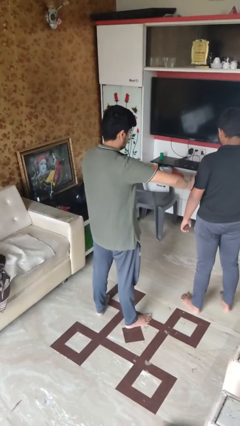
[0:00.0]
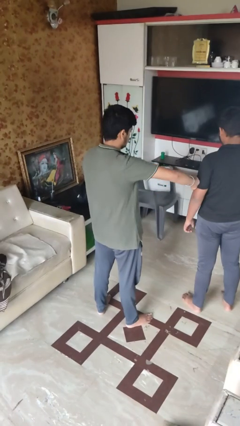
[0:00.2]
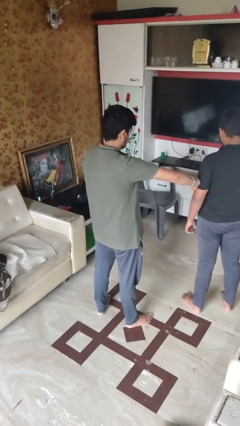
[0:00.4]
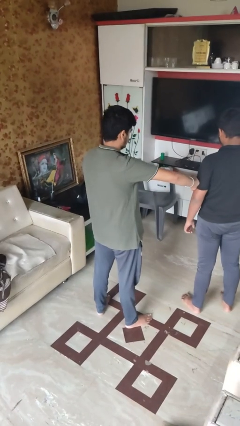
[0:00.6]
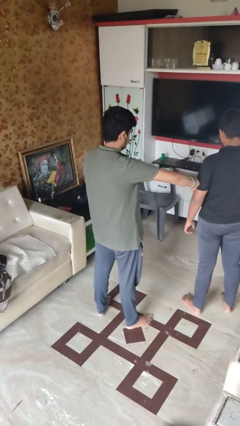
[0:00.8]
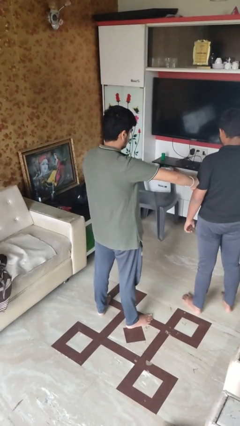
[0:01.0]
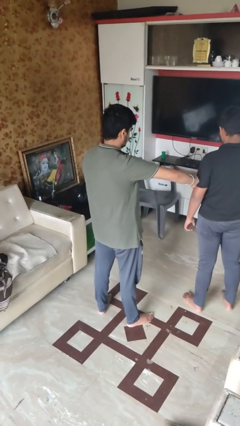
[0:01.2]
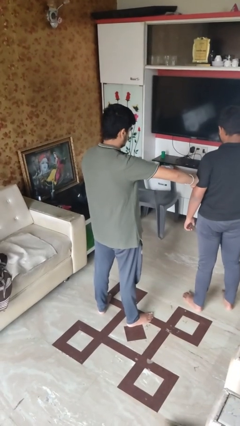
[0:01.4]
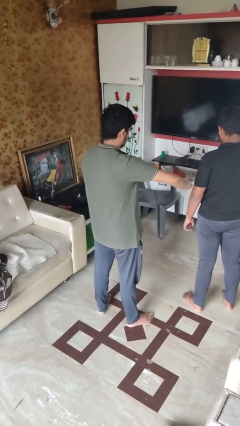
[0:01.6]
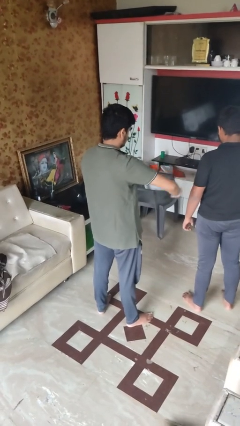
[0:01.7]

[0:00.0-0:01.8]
person grabs person by bicep

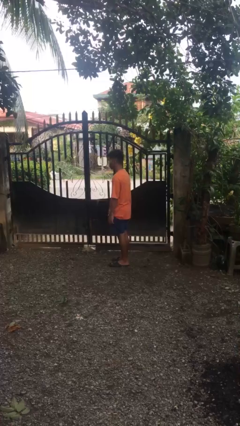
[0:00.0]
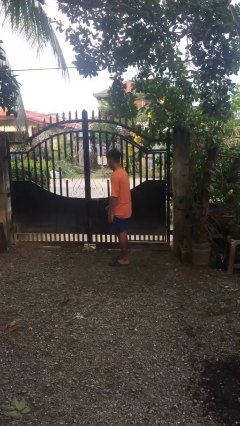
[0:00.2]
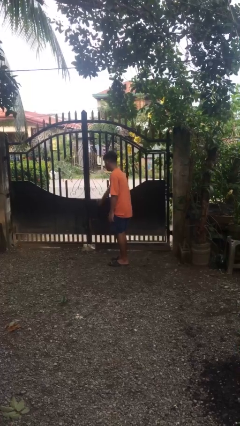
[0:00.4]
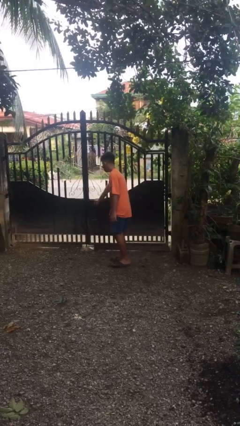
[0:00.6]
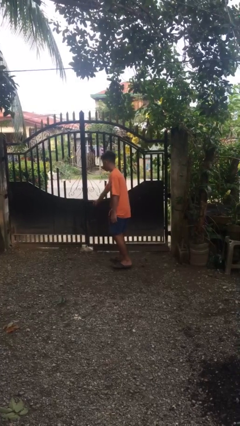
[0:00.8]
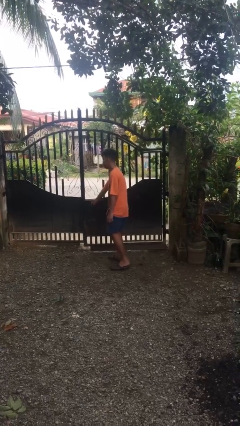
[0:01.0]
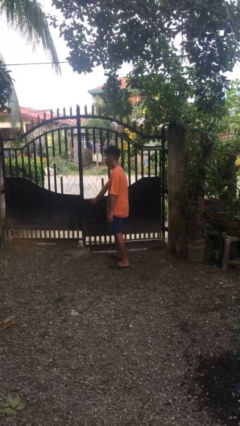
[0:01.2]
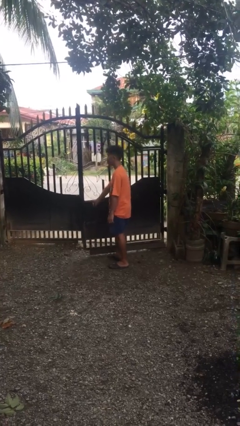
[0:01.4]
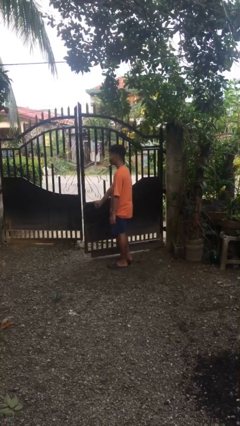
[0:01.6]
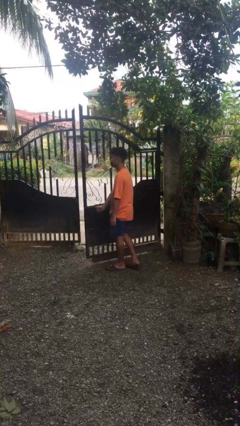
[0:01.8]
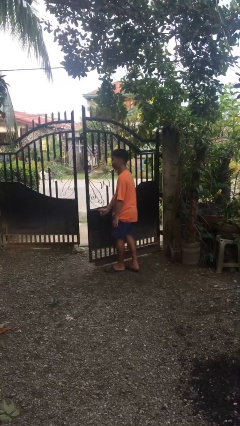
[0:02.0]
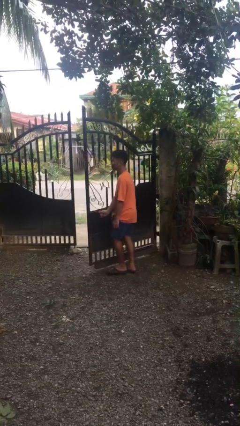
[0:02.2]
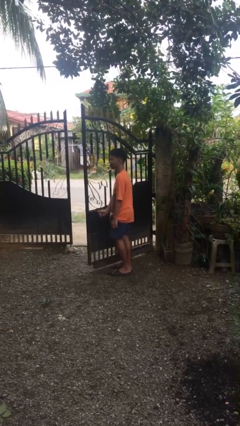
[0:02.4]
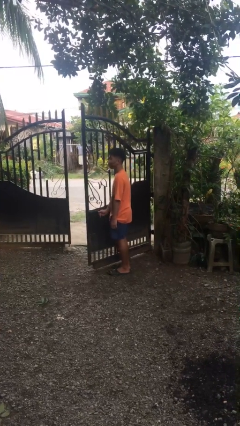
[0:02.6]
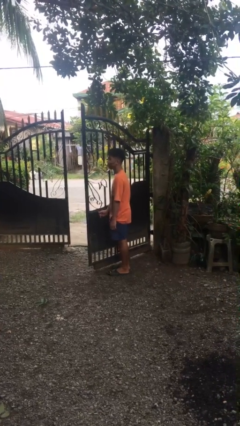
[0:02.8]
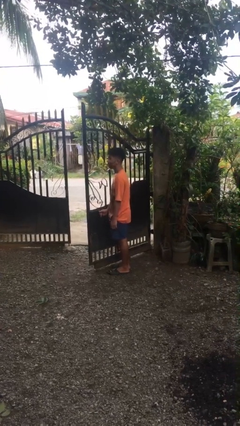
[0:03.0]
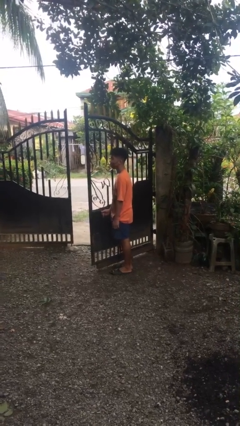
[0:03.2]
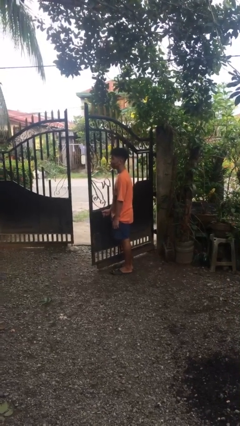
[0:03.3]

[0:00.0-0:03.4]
person opens gate

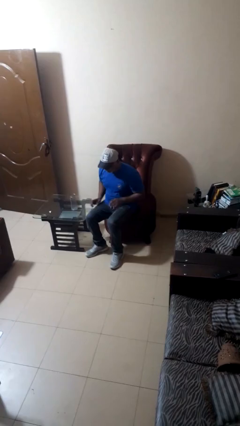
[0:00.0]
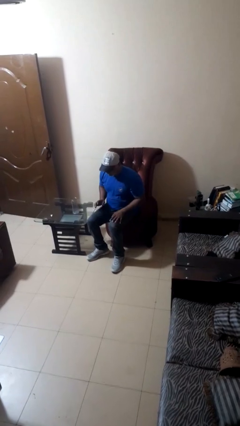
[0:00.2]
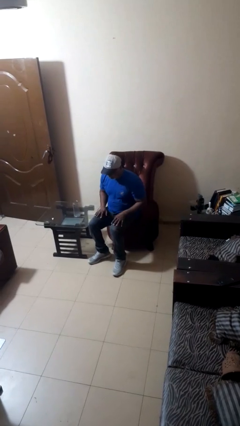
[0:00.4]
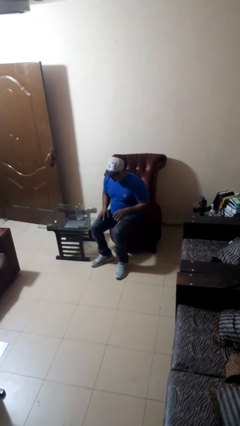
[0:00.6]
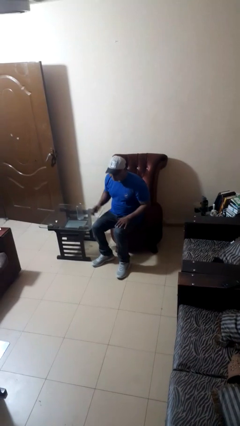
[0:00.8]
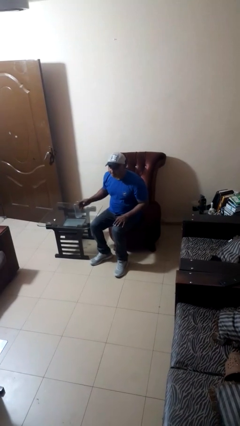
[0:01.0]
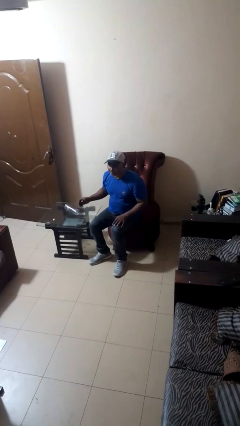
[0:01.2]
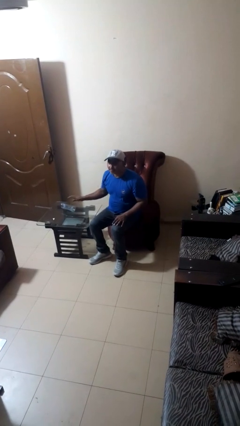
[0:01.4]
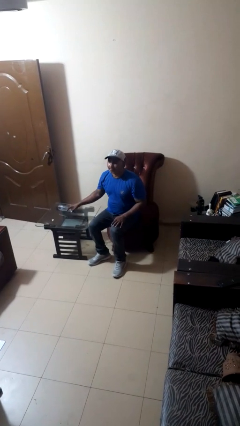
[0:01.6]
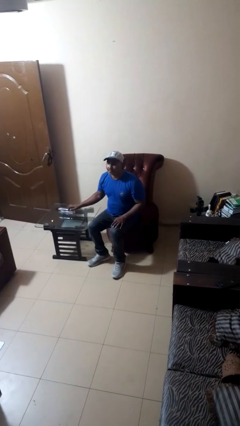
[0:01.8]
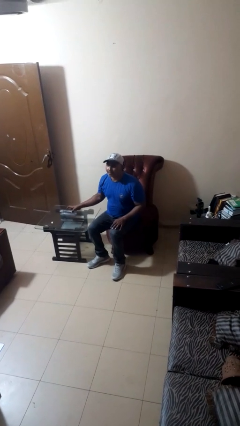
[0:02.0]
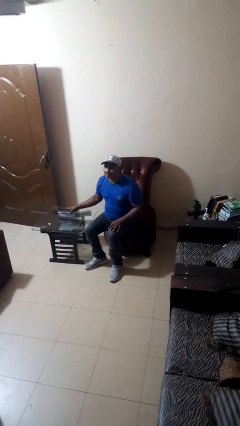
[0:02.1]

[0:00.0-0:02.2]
person knocks over glass

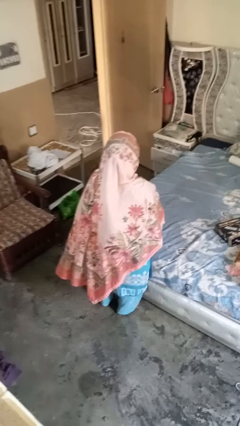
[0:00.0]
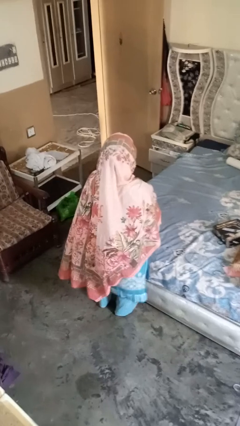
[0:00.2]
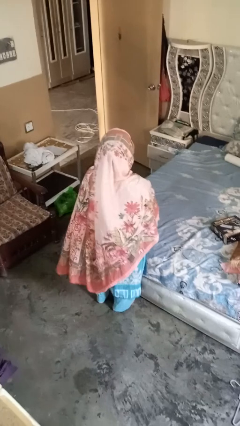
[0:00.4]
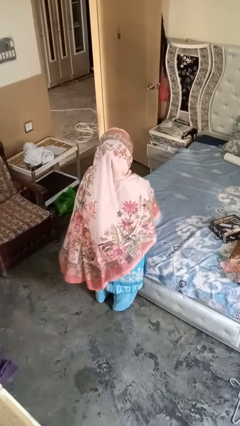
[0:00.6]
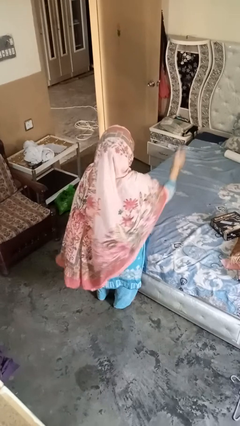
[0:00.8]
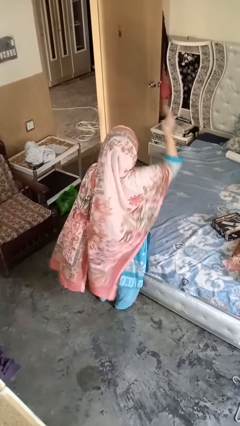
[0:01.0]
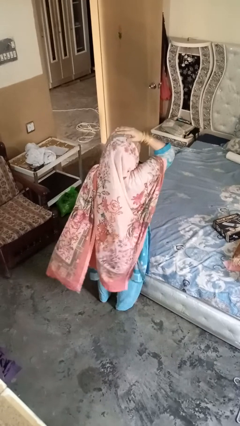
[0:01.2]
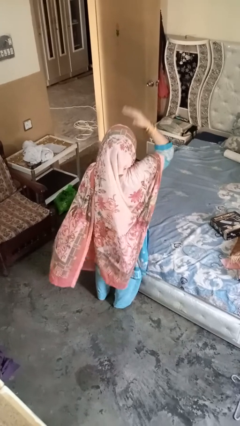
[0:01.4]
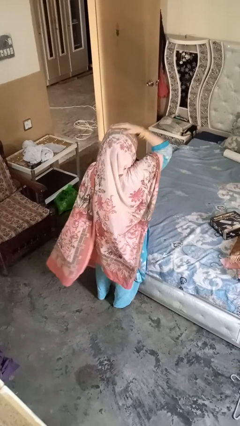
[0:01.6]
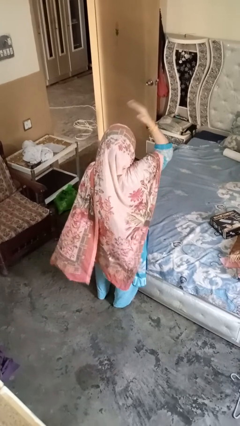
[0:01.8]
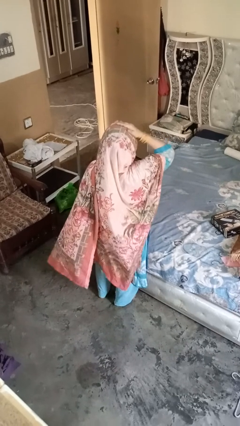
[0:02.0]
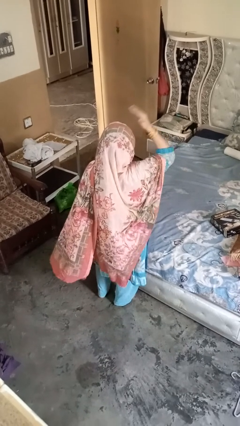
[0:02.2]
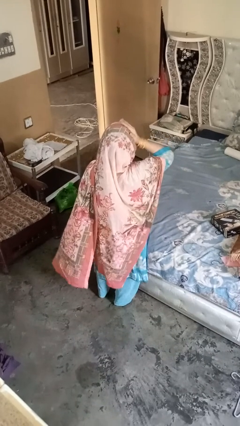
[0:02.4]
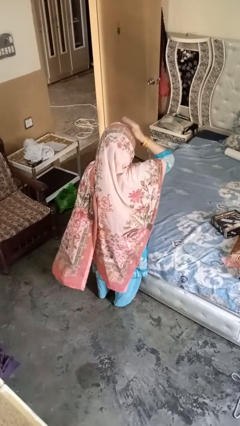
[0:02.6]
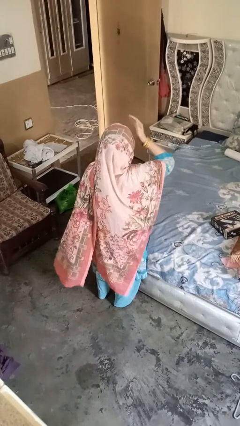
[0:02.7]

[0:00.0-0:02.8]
person pats head

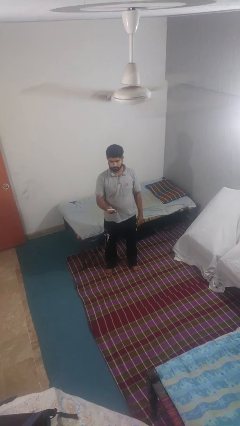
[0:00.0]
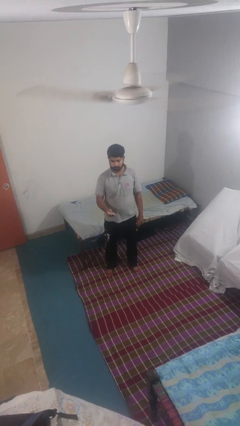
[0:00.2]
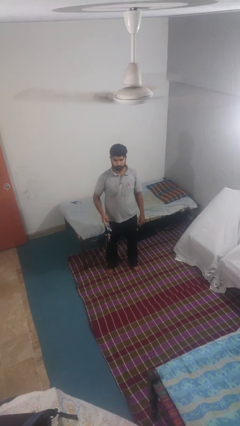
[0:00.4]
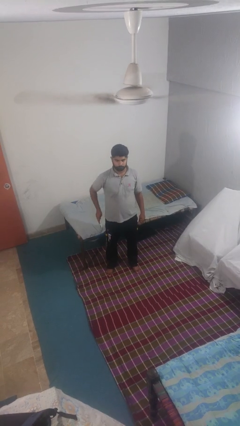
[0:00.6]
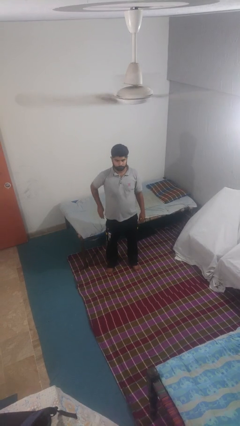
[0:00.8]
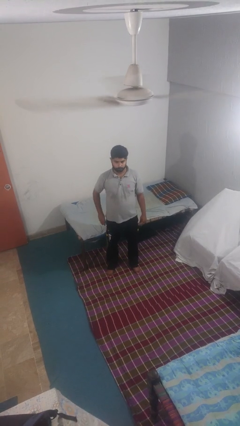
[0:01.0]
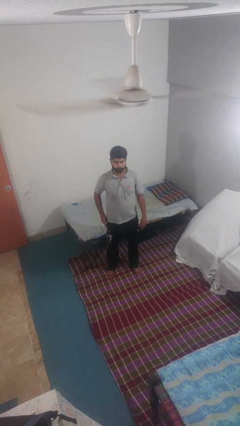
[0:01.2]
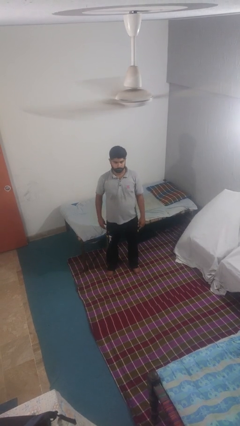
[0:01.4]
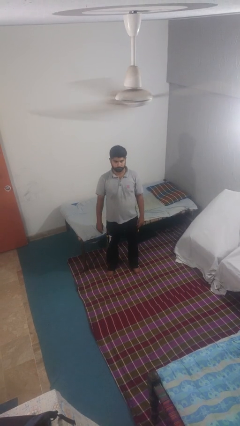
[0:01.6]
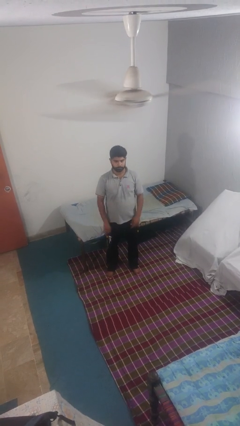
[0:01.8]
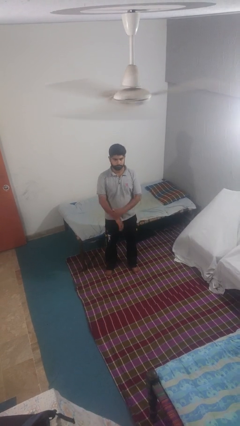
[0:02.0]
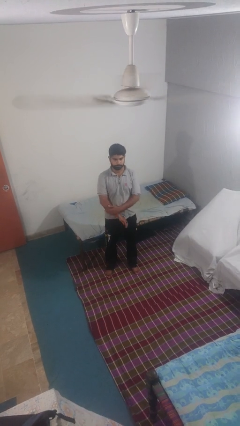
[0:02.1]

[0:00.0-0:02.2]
person puts phone into pocket

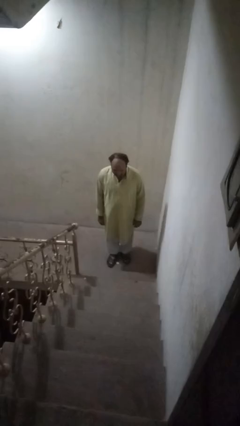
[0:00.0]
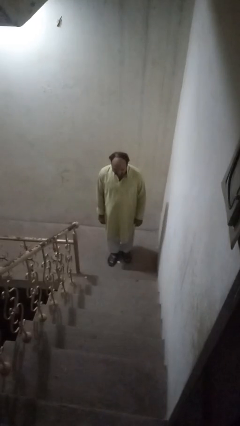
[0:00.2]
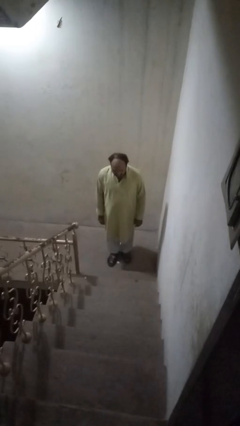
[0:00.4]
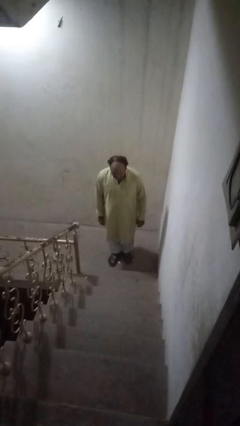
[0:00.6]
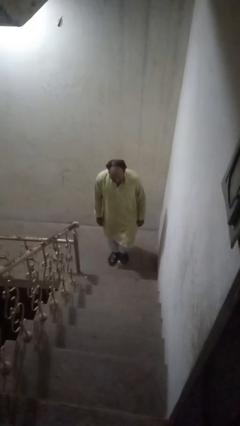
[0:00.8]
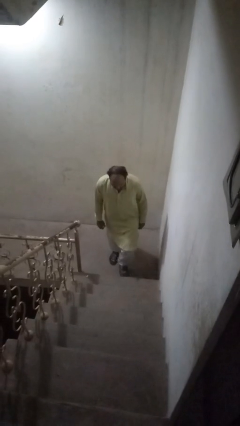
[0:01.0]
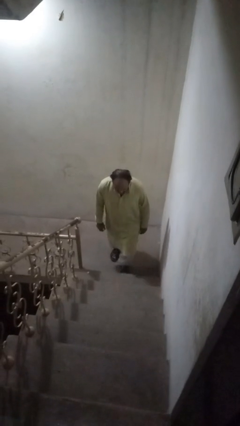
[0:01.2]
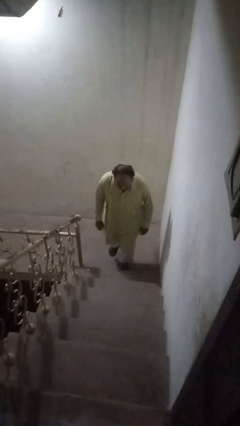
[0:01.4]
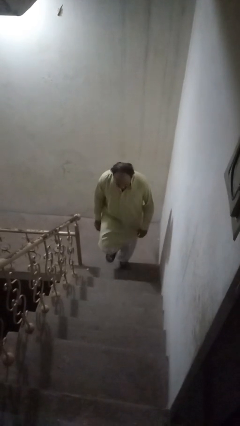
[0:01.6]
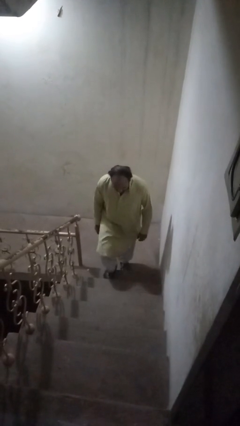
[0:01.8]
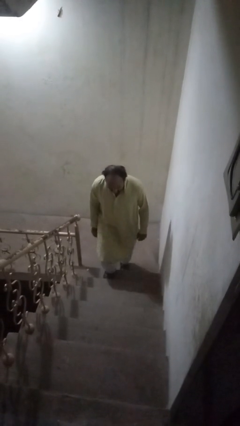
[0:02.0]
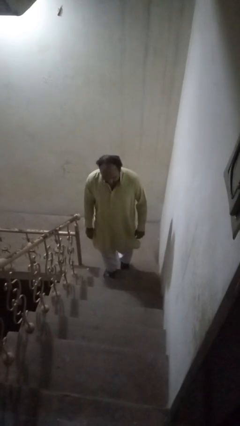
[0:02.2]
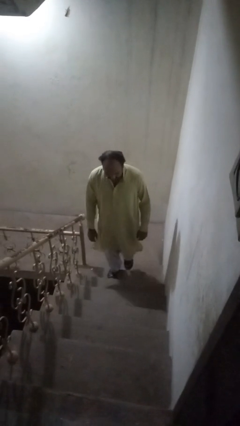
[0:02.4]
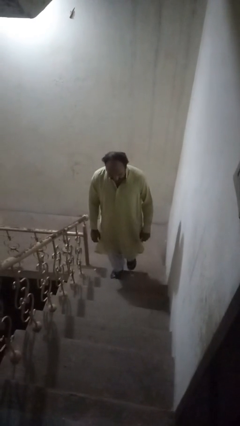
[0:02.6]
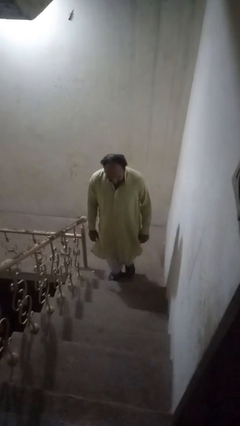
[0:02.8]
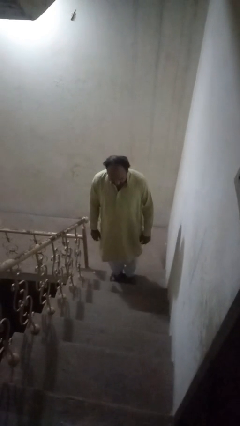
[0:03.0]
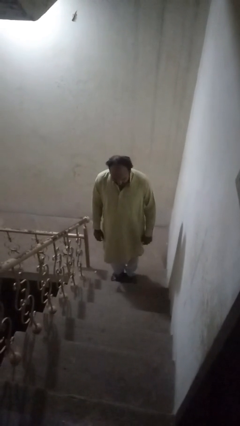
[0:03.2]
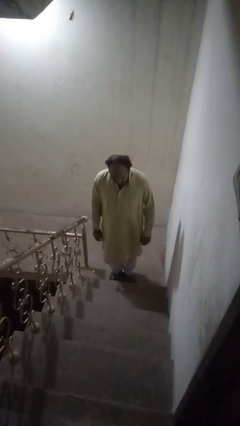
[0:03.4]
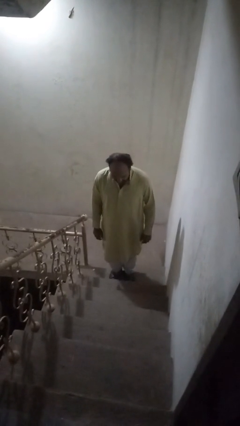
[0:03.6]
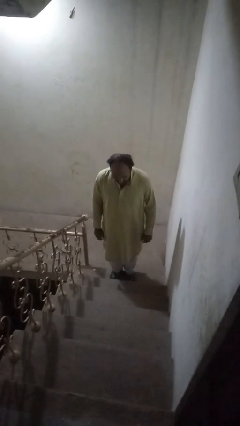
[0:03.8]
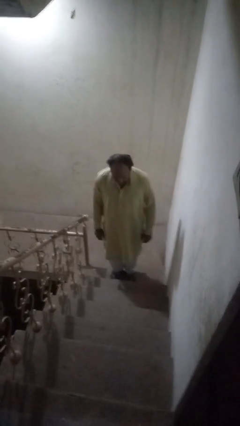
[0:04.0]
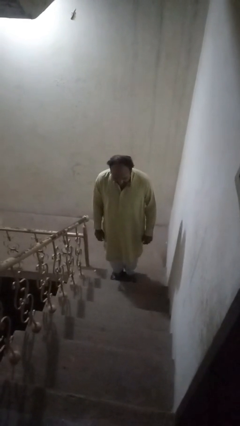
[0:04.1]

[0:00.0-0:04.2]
person climbs up ladder

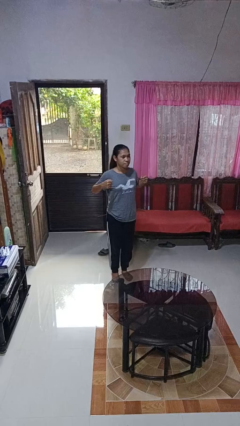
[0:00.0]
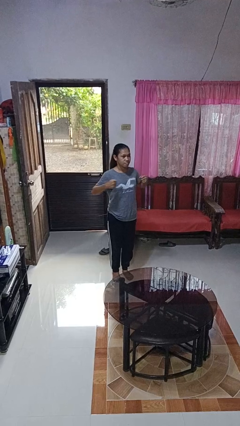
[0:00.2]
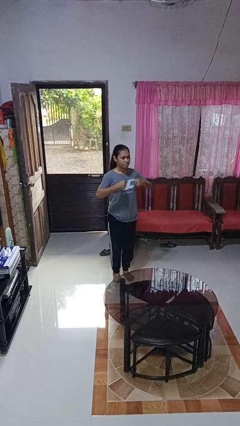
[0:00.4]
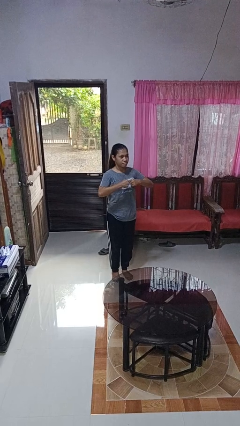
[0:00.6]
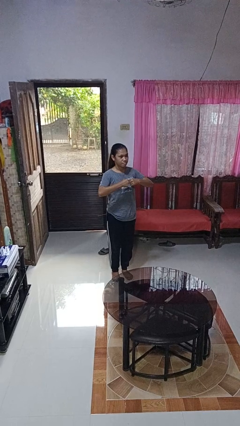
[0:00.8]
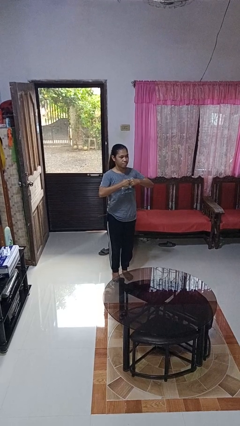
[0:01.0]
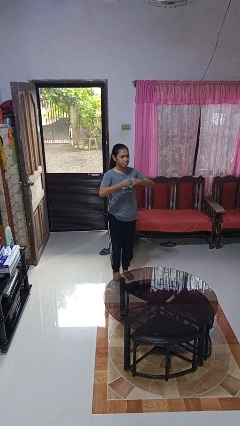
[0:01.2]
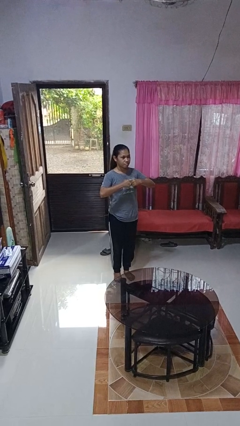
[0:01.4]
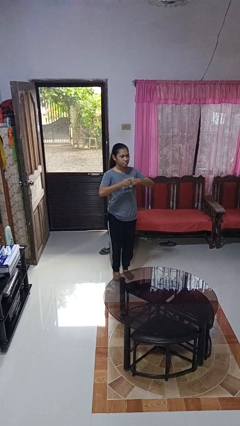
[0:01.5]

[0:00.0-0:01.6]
person gestures zoom out
